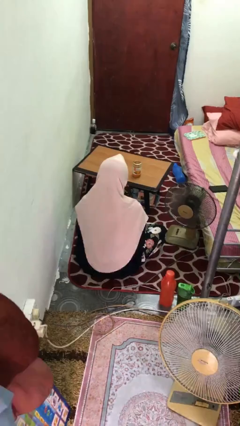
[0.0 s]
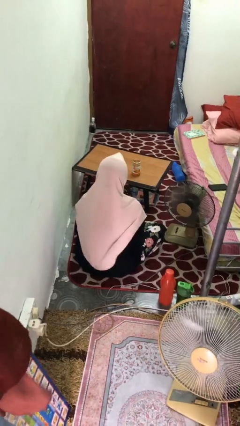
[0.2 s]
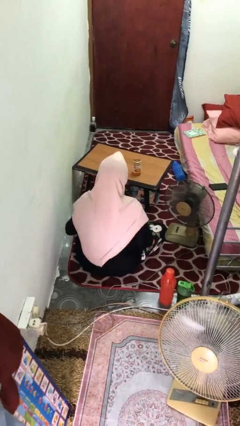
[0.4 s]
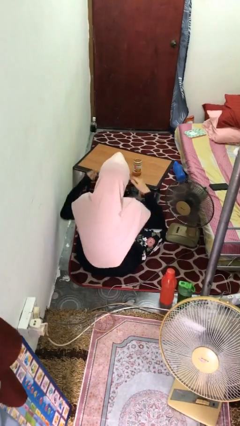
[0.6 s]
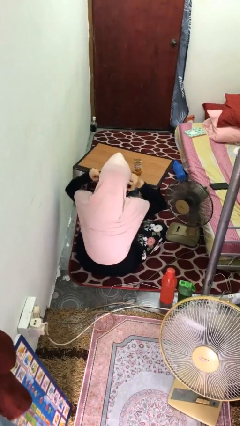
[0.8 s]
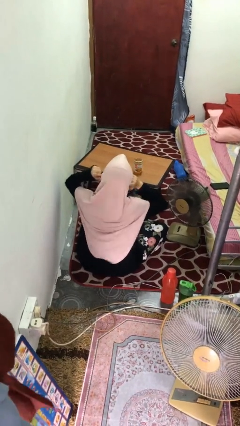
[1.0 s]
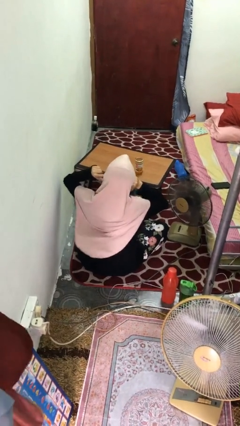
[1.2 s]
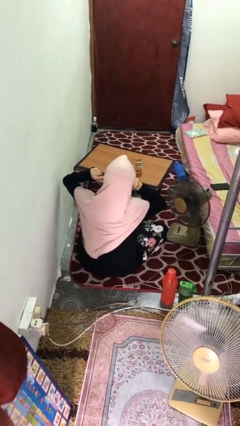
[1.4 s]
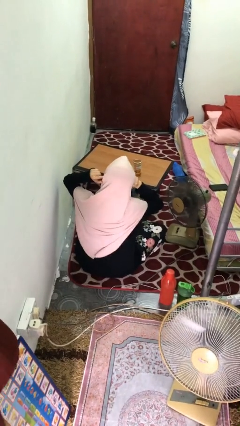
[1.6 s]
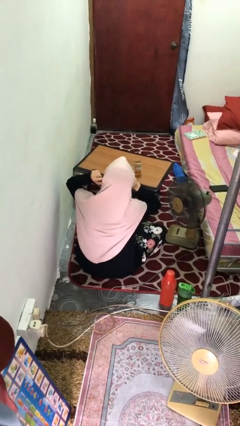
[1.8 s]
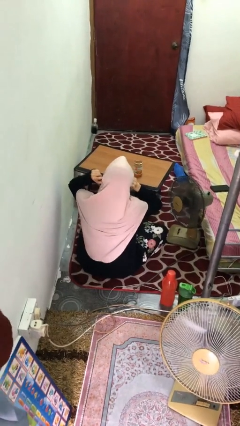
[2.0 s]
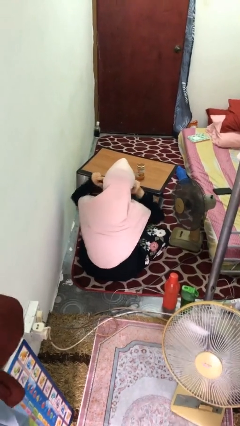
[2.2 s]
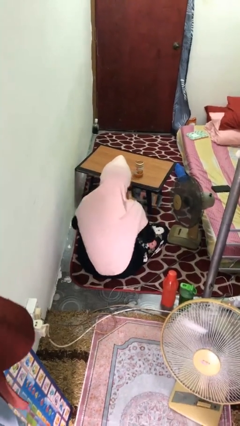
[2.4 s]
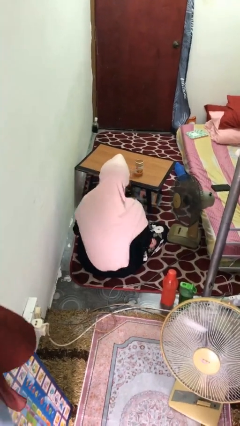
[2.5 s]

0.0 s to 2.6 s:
person puts fingers in ear

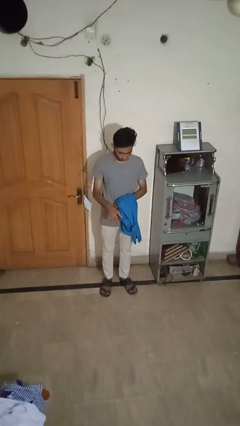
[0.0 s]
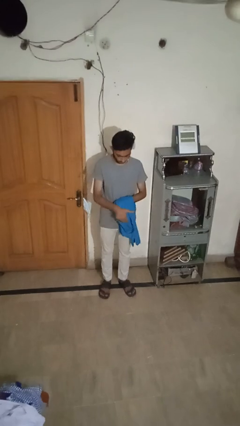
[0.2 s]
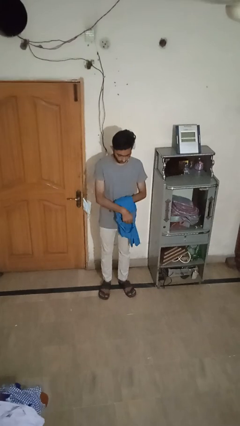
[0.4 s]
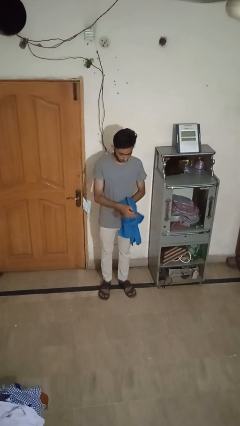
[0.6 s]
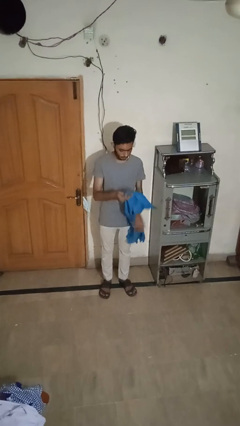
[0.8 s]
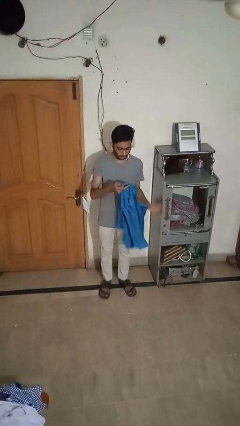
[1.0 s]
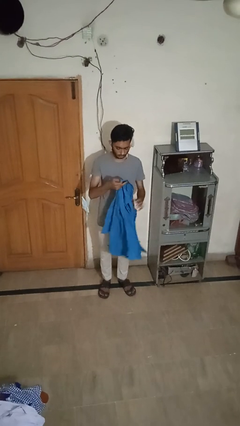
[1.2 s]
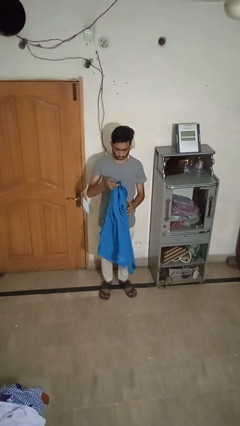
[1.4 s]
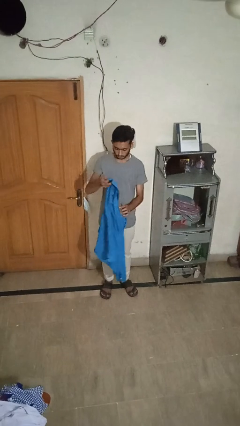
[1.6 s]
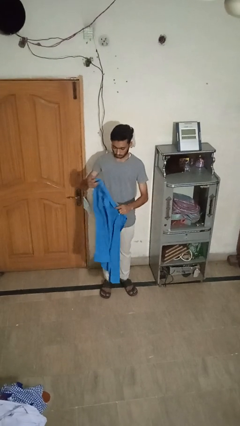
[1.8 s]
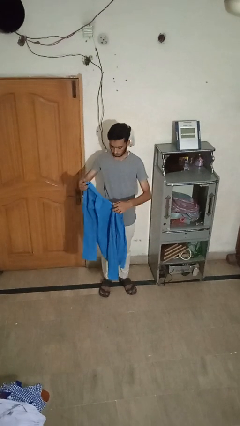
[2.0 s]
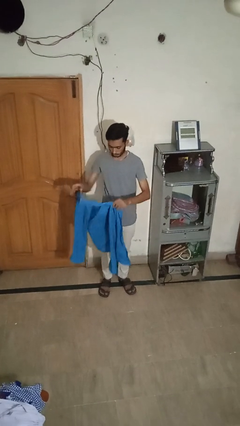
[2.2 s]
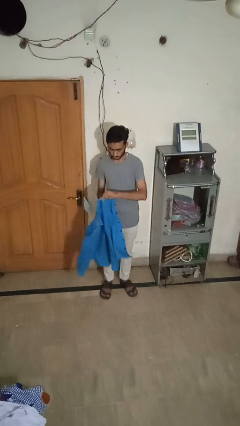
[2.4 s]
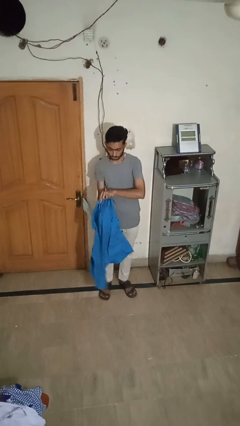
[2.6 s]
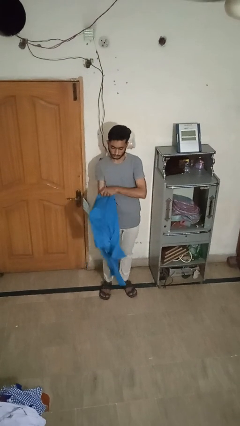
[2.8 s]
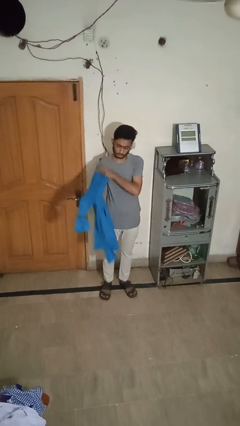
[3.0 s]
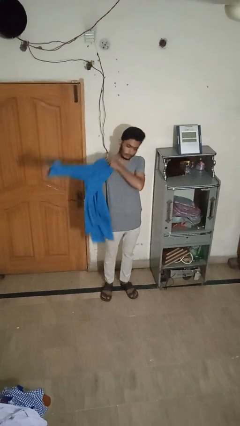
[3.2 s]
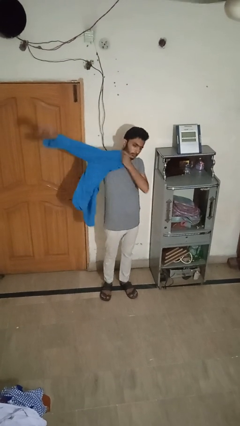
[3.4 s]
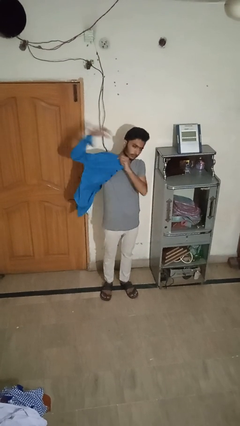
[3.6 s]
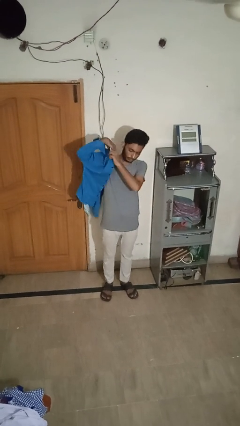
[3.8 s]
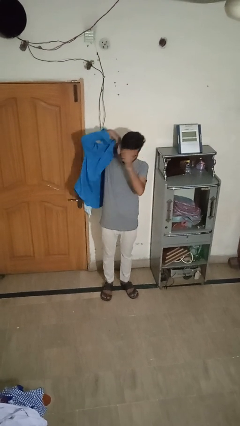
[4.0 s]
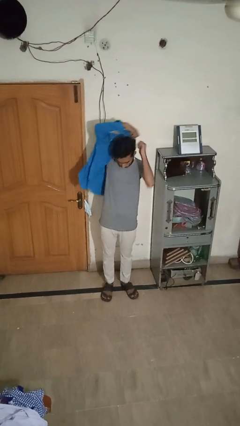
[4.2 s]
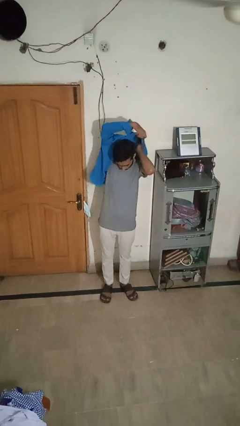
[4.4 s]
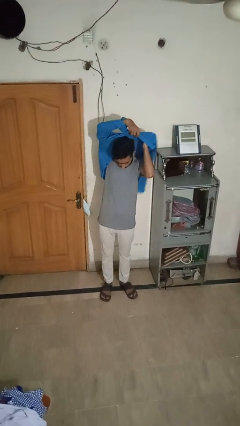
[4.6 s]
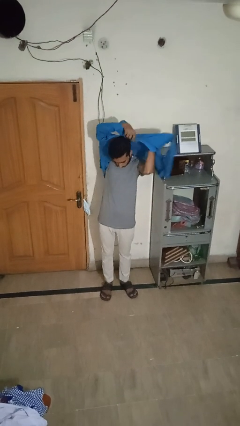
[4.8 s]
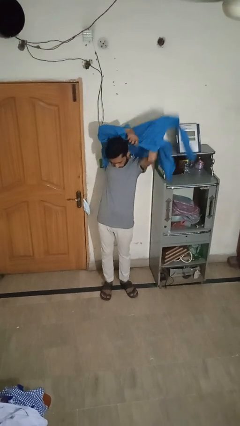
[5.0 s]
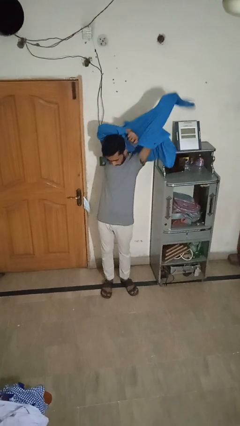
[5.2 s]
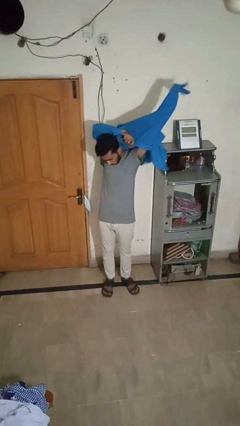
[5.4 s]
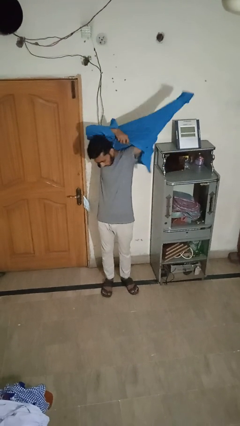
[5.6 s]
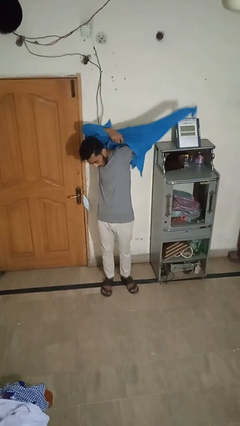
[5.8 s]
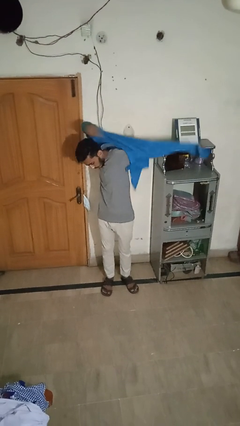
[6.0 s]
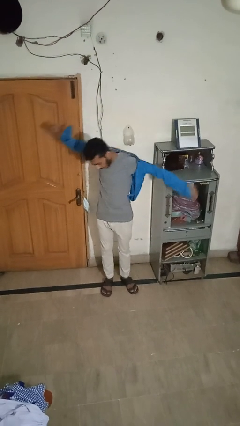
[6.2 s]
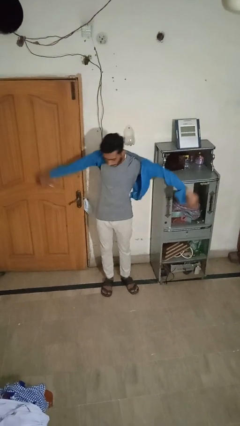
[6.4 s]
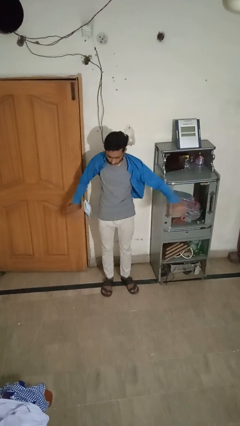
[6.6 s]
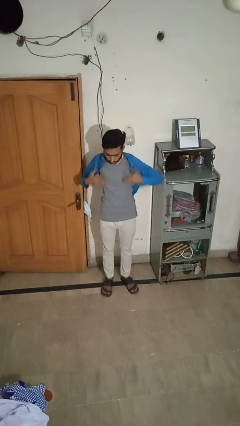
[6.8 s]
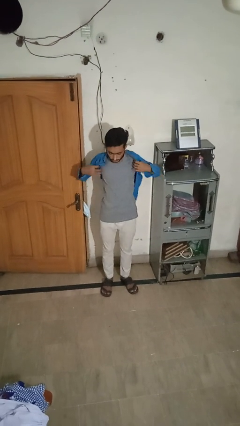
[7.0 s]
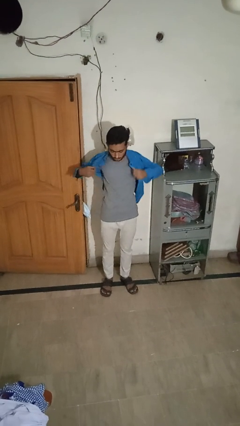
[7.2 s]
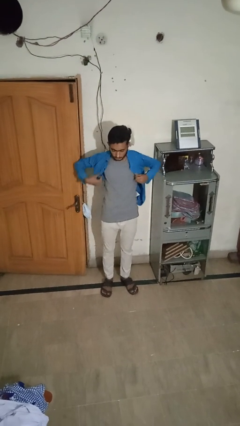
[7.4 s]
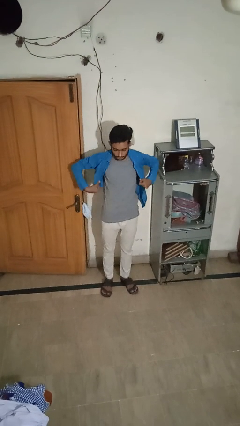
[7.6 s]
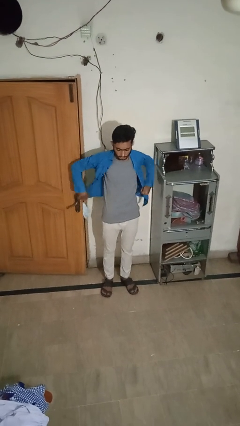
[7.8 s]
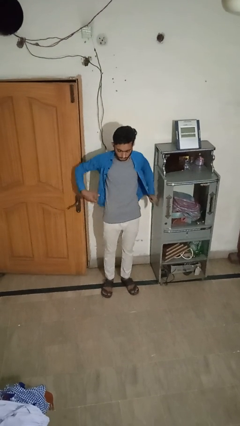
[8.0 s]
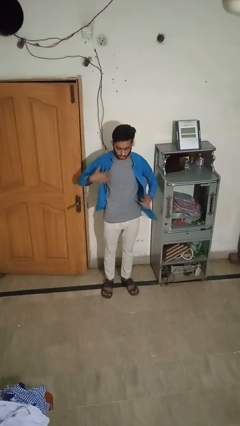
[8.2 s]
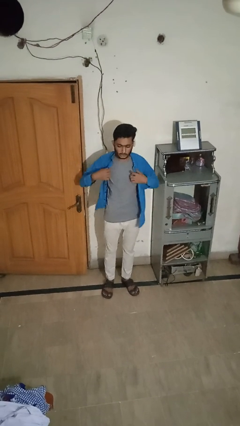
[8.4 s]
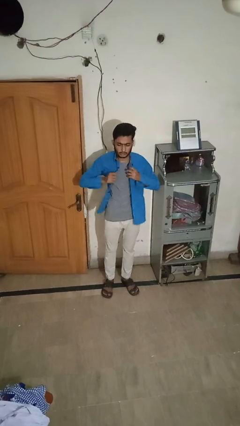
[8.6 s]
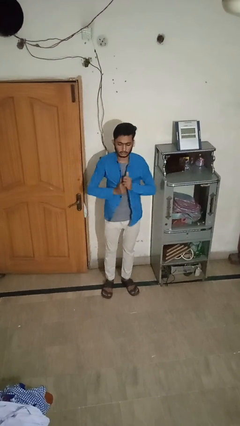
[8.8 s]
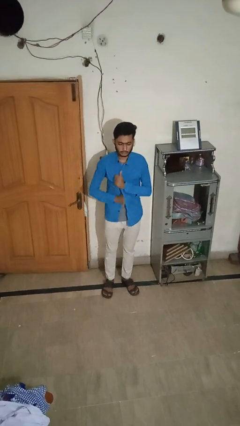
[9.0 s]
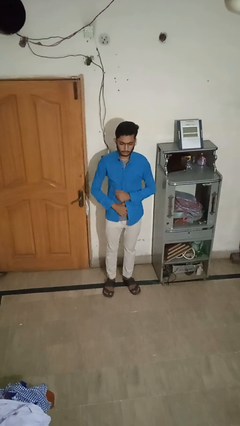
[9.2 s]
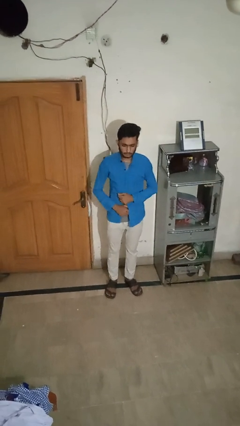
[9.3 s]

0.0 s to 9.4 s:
person puts on shirt

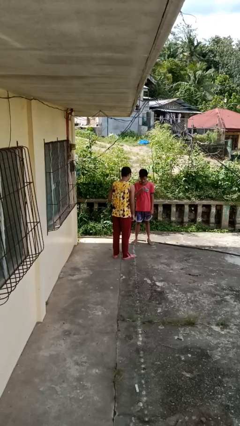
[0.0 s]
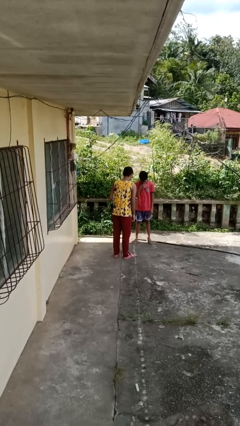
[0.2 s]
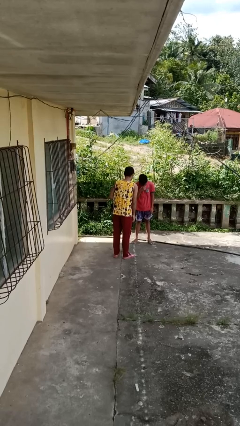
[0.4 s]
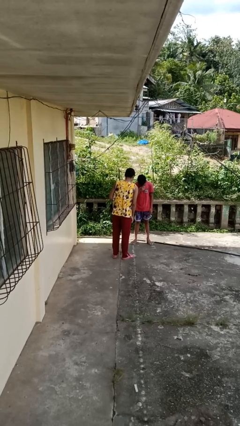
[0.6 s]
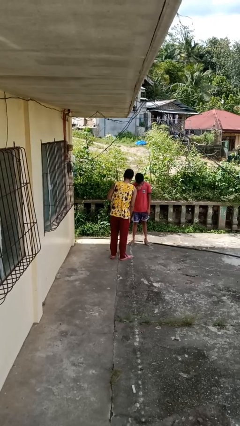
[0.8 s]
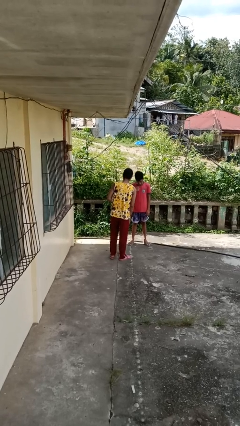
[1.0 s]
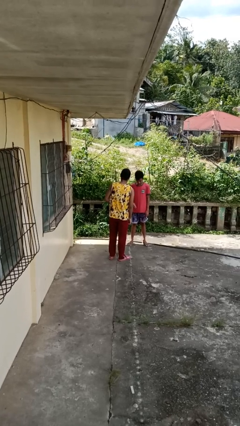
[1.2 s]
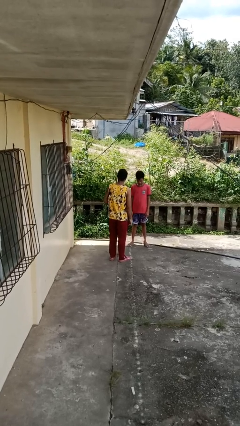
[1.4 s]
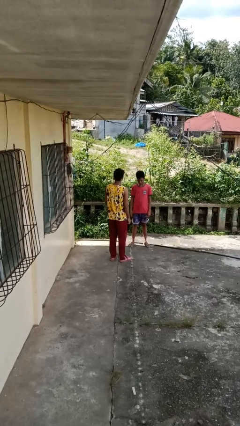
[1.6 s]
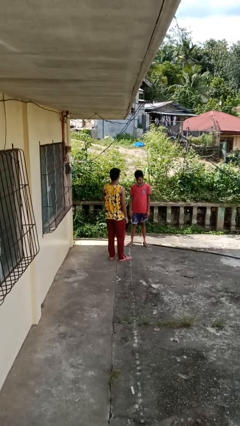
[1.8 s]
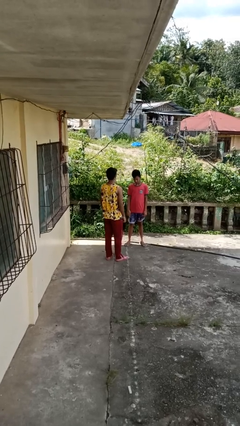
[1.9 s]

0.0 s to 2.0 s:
person laughs with person

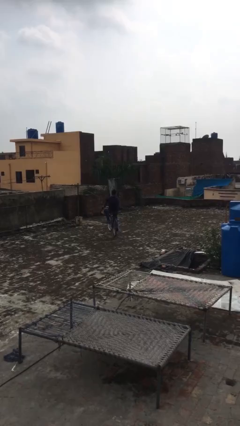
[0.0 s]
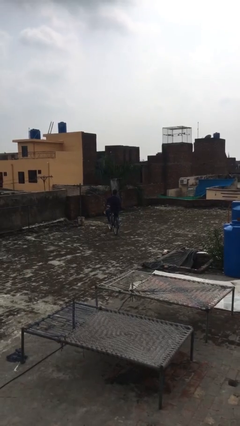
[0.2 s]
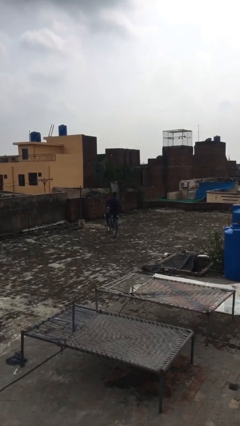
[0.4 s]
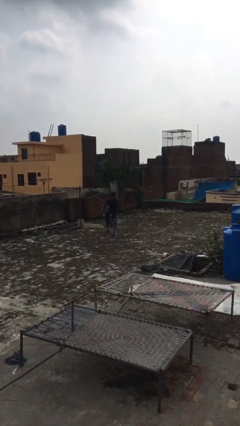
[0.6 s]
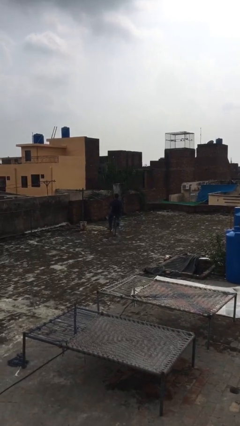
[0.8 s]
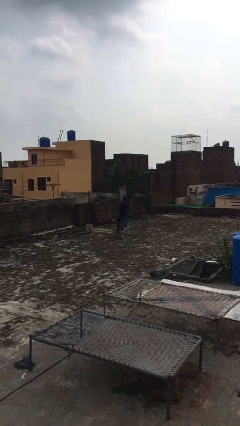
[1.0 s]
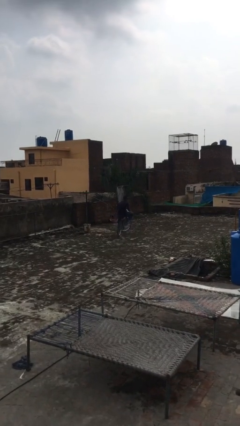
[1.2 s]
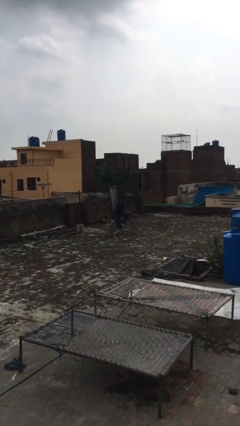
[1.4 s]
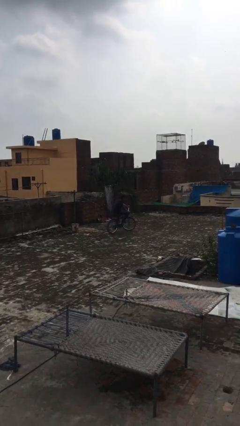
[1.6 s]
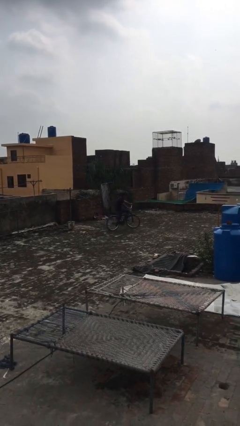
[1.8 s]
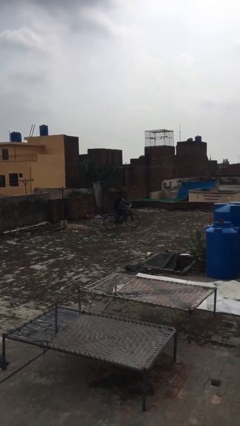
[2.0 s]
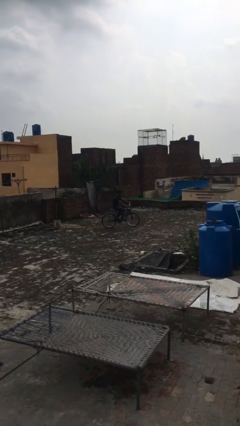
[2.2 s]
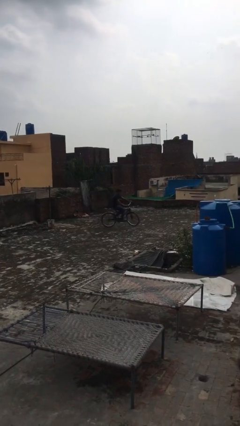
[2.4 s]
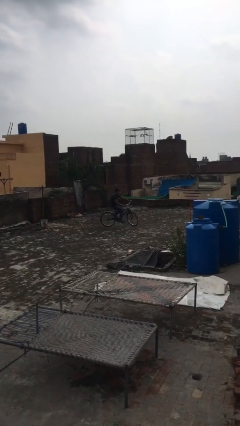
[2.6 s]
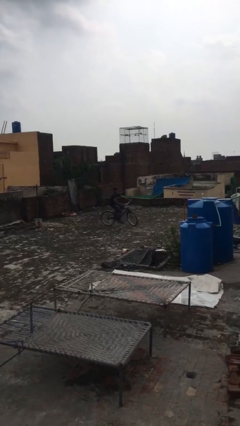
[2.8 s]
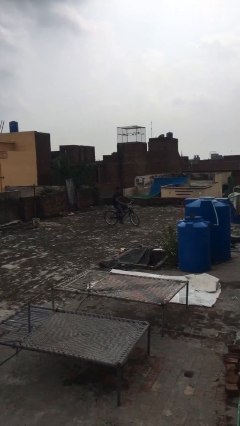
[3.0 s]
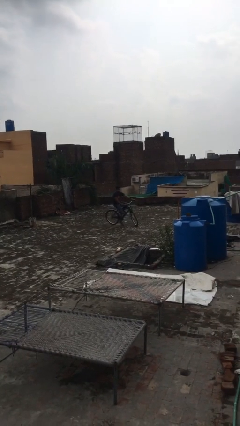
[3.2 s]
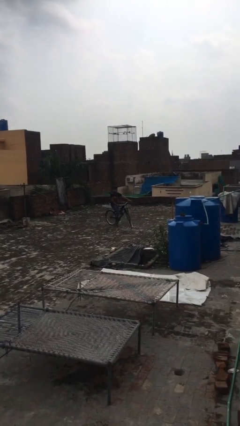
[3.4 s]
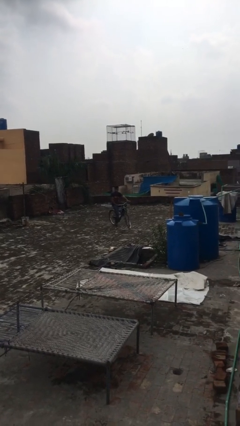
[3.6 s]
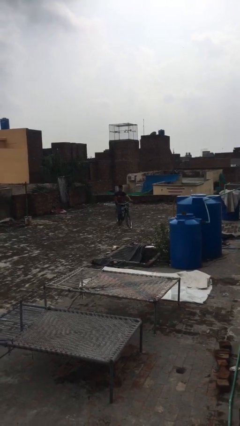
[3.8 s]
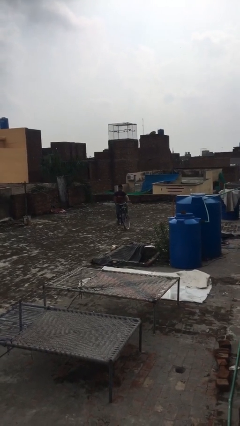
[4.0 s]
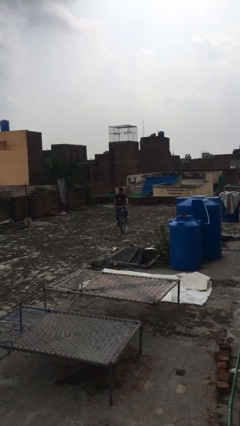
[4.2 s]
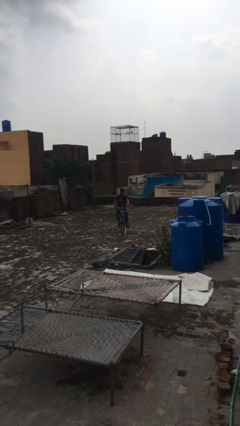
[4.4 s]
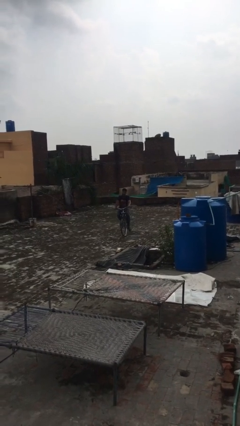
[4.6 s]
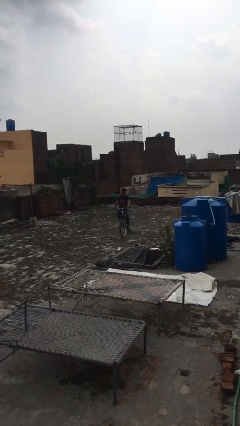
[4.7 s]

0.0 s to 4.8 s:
person rides bicycle
